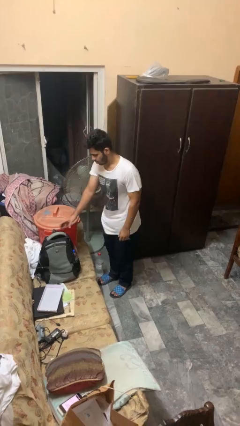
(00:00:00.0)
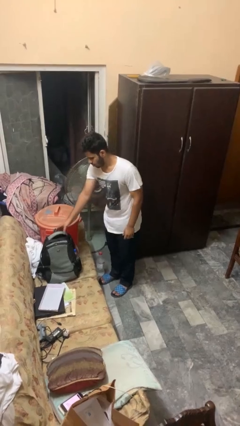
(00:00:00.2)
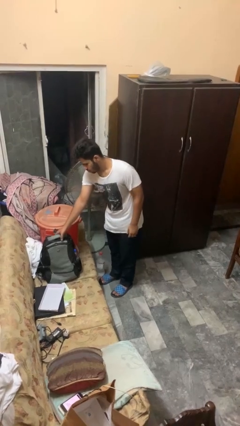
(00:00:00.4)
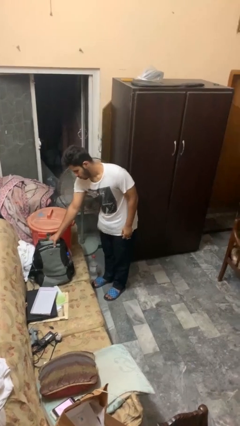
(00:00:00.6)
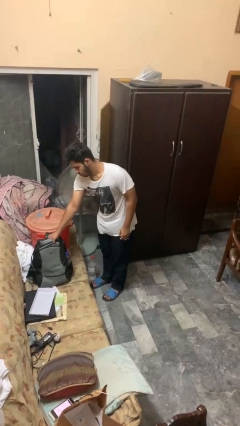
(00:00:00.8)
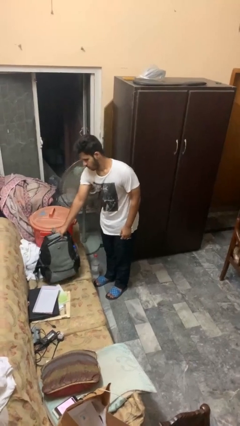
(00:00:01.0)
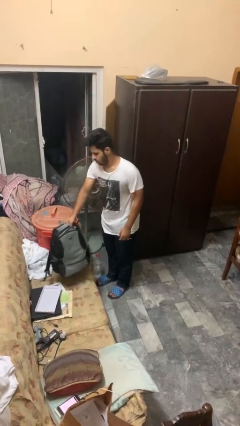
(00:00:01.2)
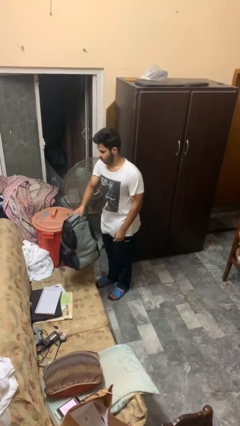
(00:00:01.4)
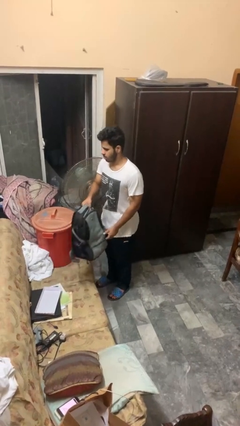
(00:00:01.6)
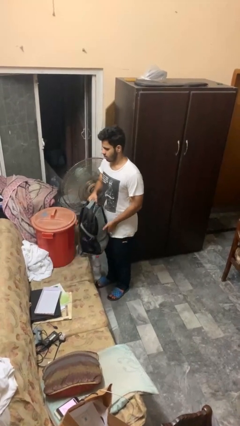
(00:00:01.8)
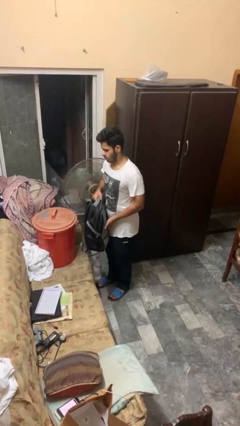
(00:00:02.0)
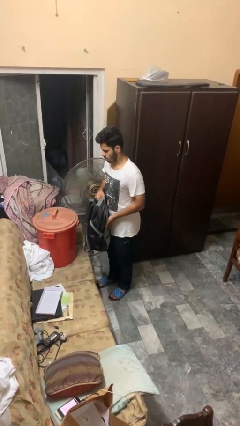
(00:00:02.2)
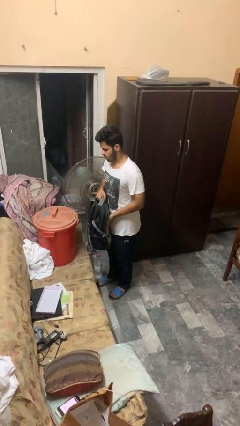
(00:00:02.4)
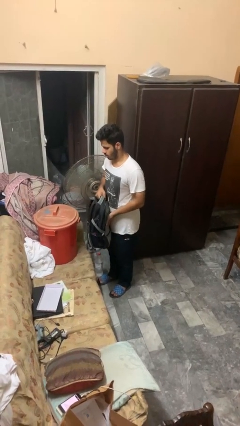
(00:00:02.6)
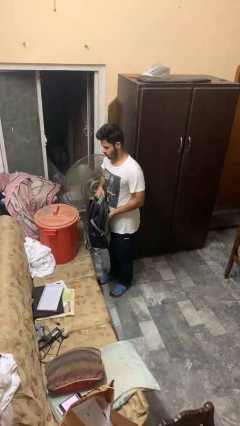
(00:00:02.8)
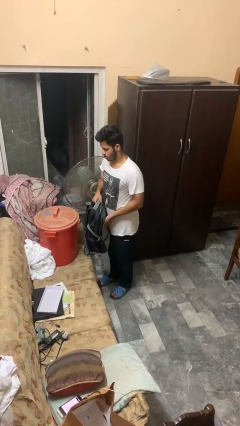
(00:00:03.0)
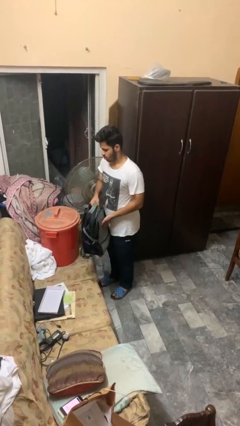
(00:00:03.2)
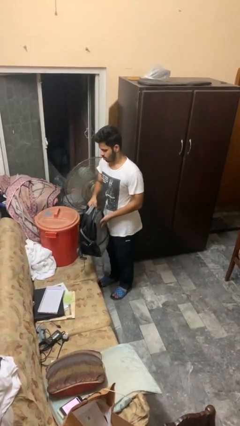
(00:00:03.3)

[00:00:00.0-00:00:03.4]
person picks up object from couch

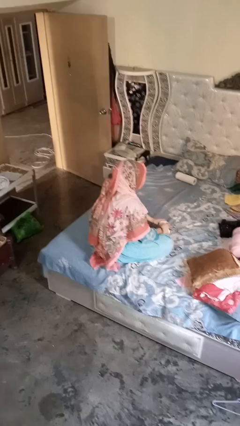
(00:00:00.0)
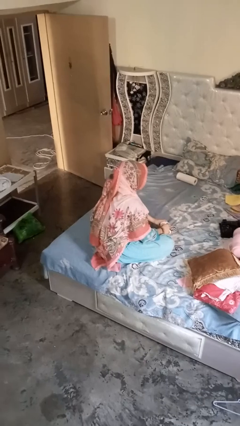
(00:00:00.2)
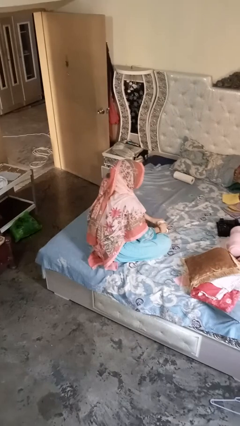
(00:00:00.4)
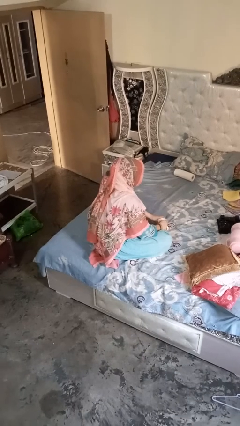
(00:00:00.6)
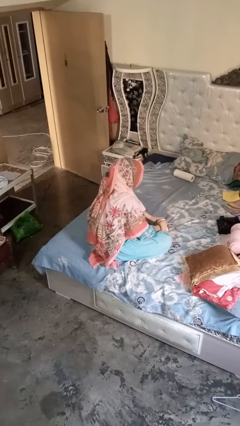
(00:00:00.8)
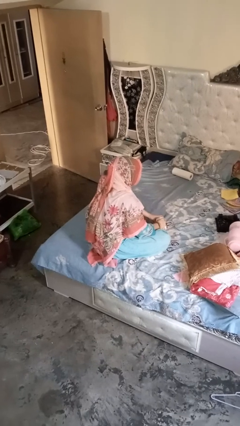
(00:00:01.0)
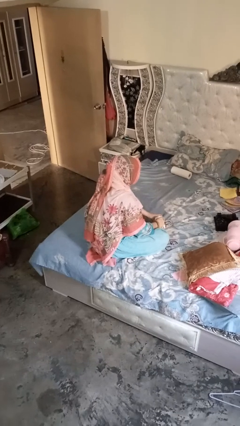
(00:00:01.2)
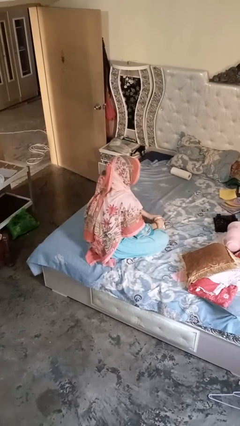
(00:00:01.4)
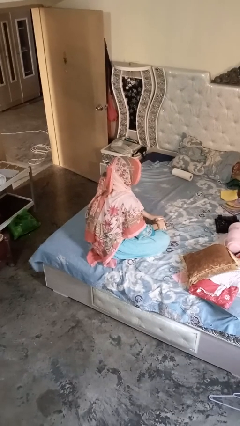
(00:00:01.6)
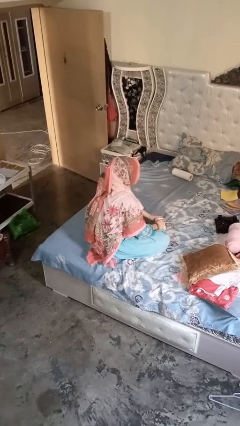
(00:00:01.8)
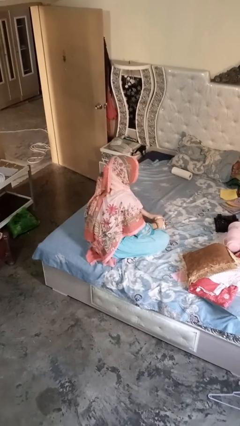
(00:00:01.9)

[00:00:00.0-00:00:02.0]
person stirs mug

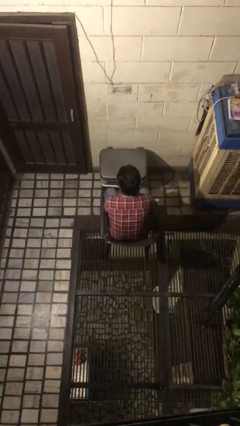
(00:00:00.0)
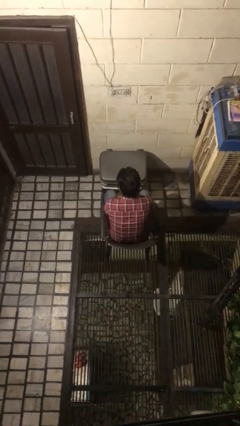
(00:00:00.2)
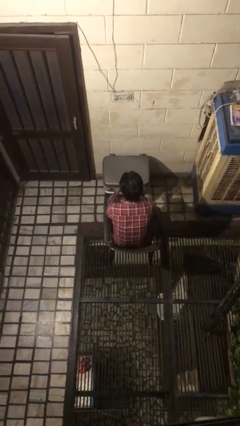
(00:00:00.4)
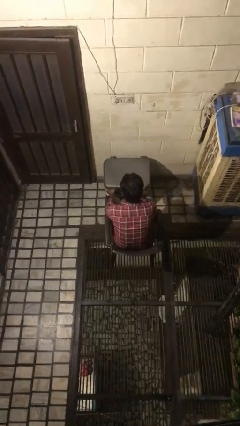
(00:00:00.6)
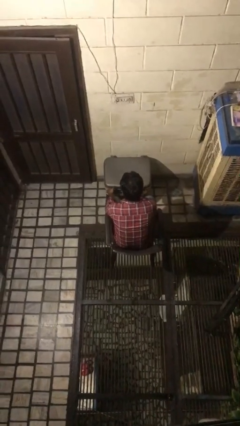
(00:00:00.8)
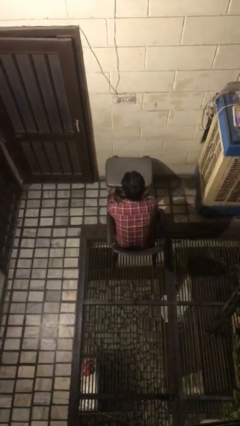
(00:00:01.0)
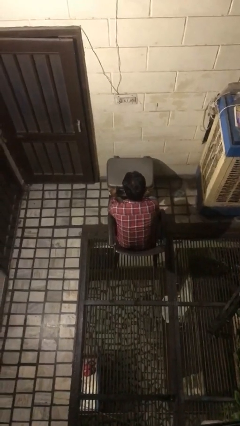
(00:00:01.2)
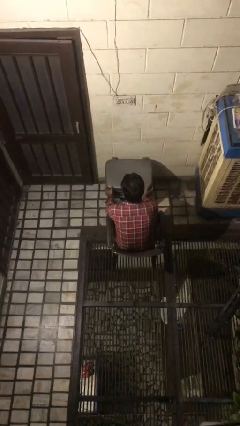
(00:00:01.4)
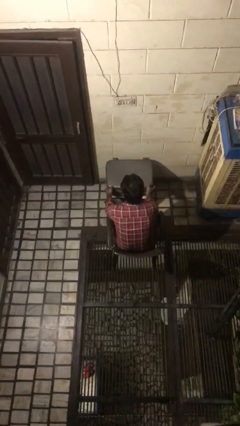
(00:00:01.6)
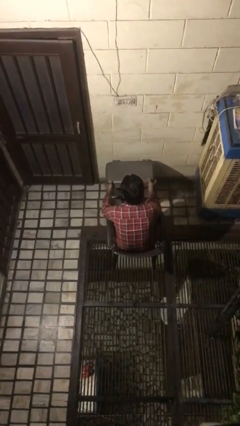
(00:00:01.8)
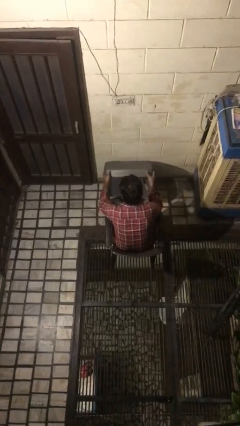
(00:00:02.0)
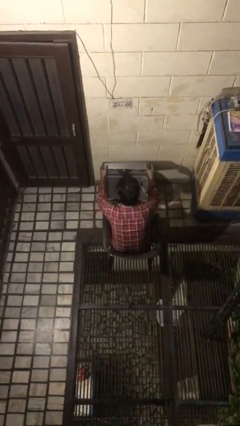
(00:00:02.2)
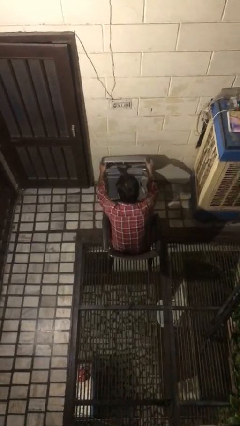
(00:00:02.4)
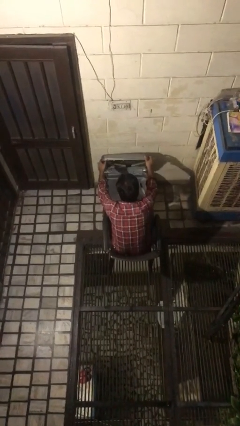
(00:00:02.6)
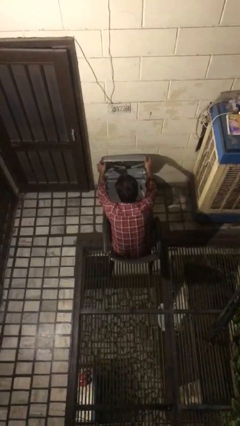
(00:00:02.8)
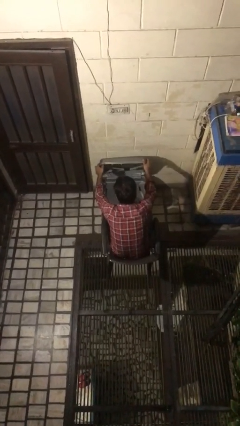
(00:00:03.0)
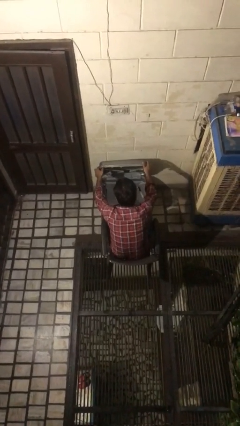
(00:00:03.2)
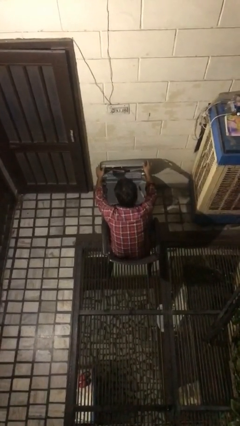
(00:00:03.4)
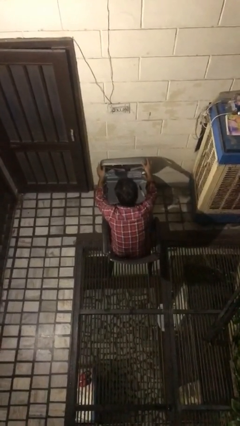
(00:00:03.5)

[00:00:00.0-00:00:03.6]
person opens suitcase

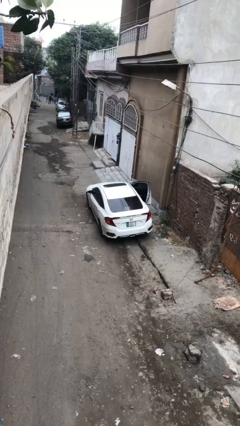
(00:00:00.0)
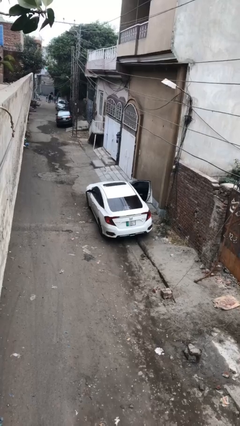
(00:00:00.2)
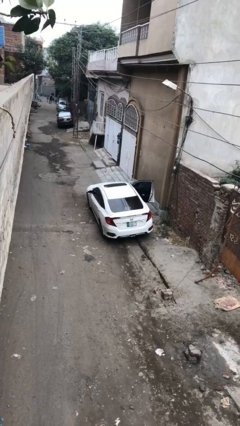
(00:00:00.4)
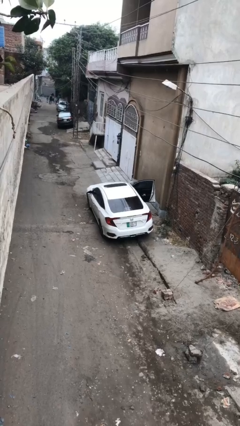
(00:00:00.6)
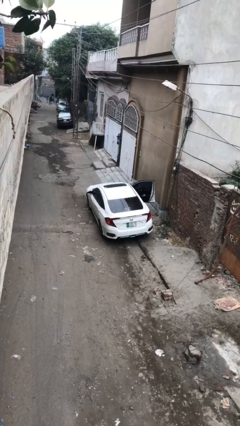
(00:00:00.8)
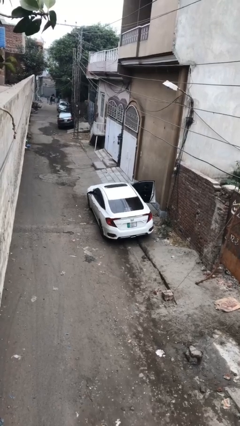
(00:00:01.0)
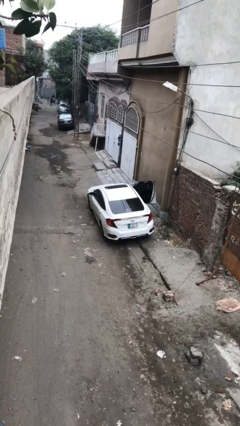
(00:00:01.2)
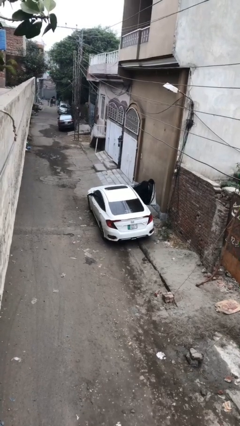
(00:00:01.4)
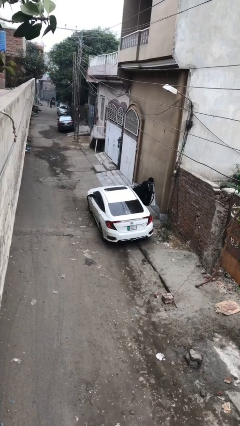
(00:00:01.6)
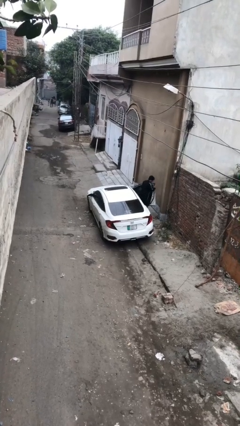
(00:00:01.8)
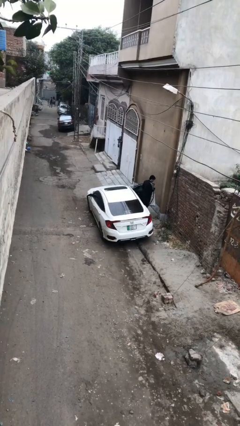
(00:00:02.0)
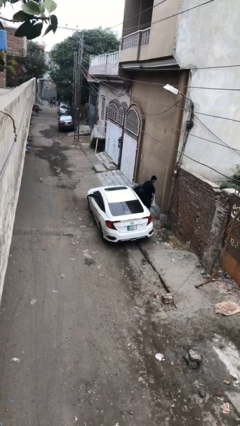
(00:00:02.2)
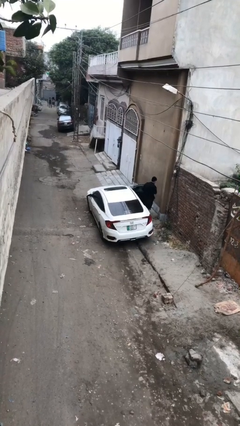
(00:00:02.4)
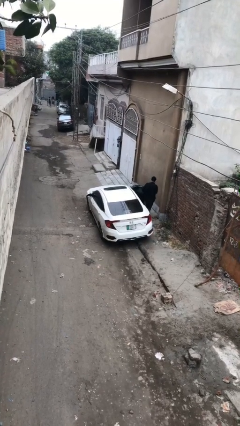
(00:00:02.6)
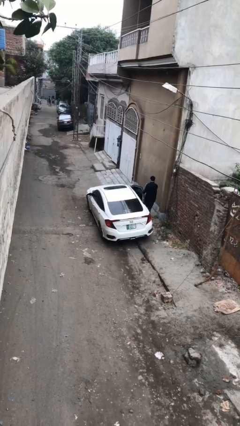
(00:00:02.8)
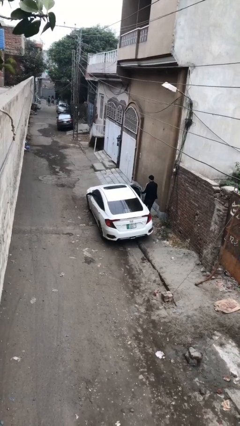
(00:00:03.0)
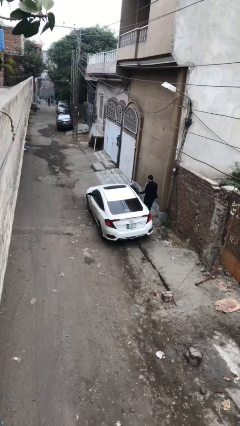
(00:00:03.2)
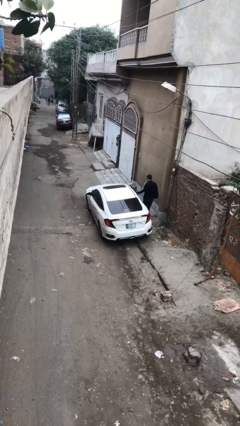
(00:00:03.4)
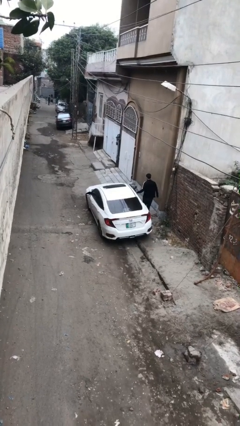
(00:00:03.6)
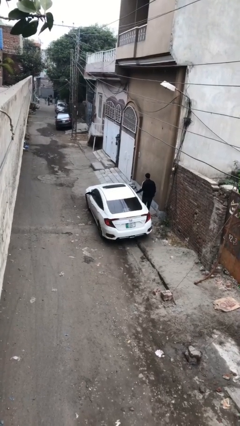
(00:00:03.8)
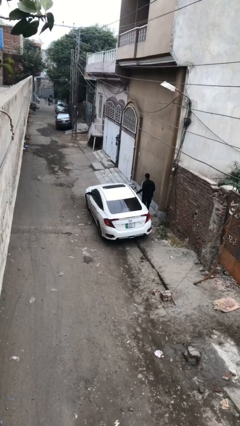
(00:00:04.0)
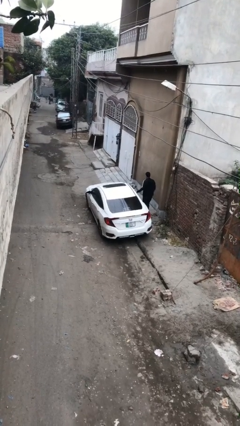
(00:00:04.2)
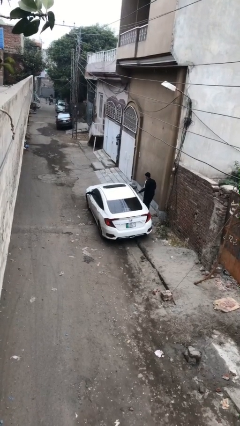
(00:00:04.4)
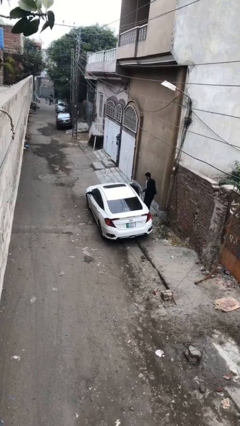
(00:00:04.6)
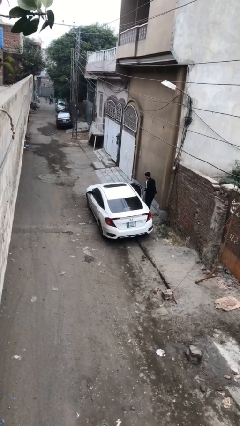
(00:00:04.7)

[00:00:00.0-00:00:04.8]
car drops off person

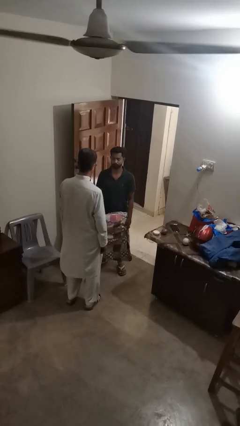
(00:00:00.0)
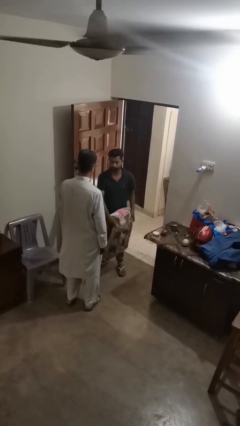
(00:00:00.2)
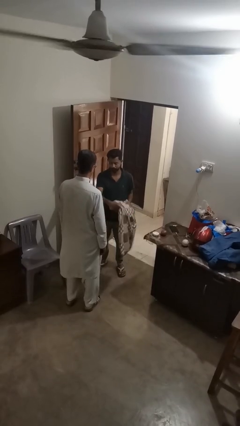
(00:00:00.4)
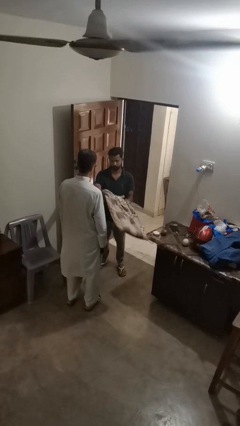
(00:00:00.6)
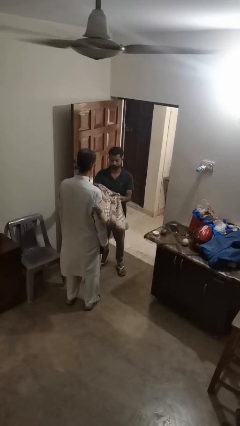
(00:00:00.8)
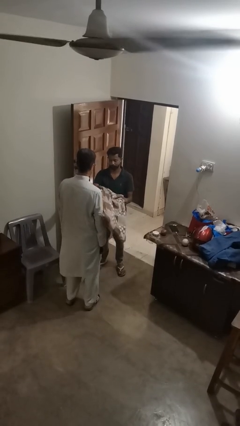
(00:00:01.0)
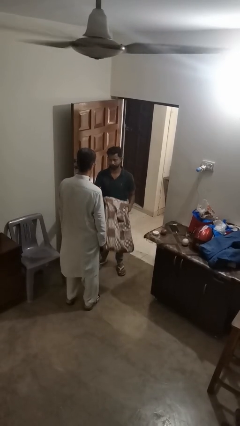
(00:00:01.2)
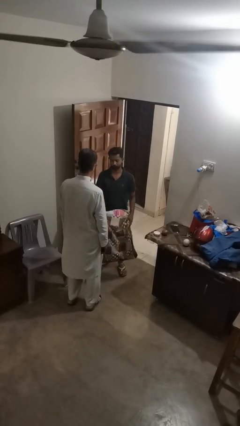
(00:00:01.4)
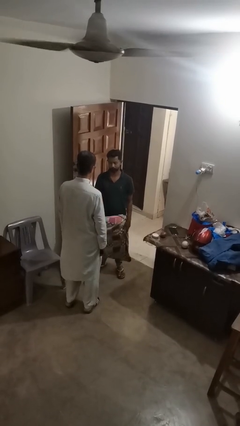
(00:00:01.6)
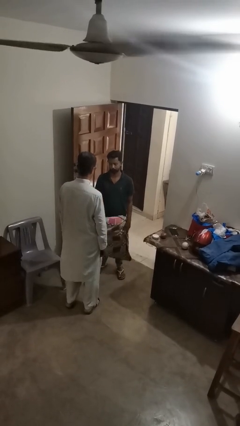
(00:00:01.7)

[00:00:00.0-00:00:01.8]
person hits person with pillow

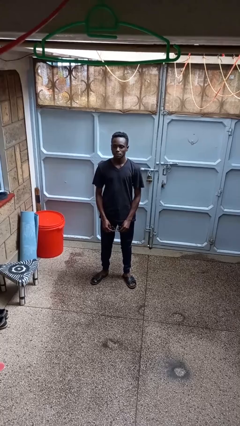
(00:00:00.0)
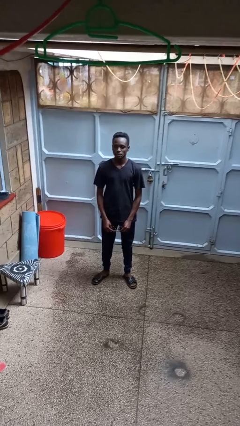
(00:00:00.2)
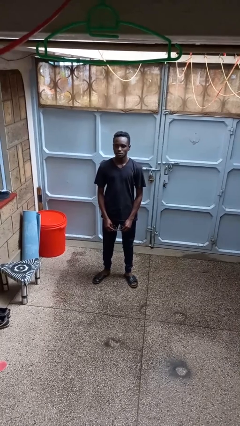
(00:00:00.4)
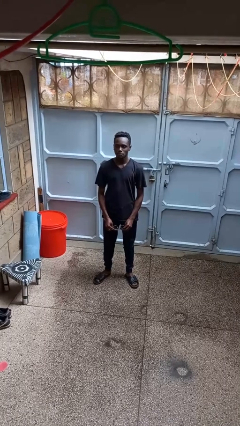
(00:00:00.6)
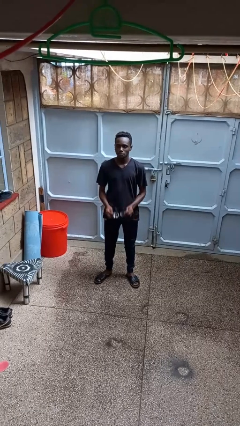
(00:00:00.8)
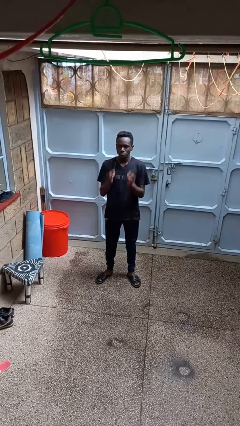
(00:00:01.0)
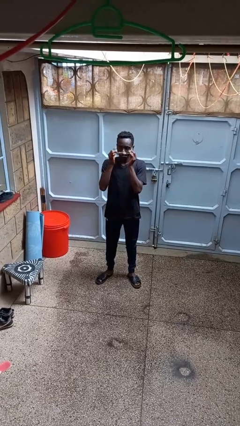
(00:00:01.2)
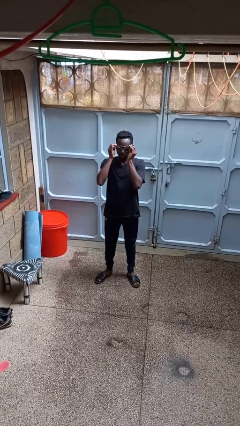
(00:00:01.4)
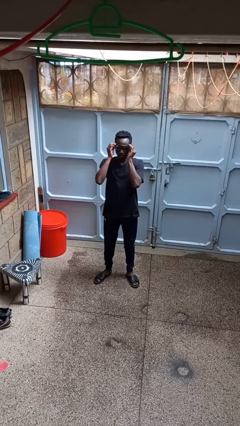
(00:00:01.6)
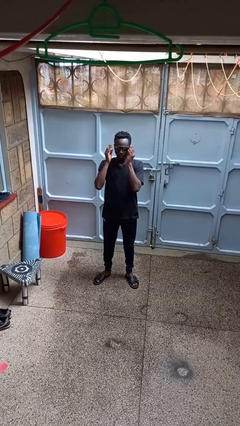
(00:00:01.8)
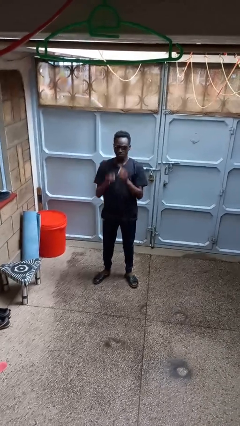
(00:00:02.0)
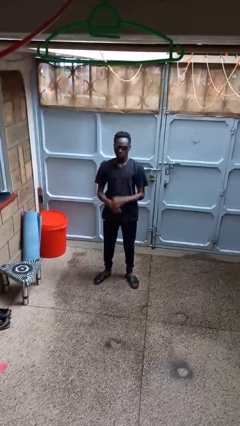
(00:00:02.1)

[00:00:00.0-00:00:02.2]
person puts on sunglasses
